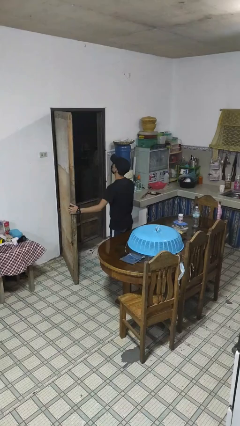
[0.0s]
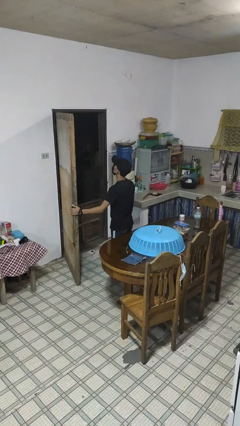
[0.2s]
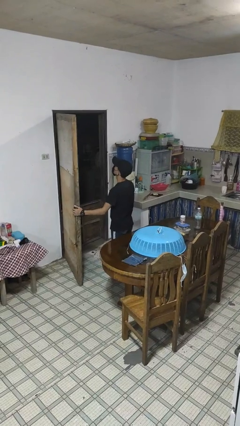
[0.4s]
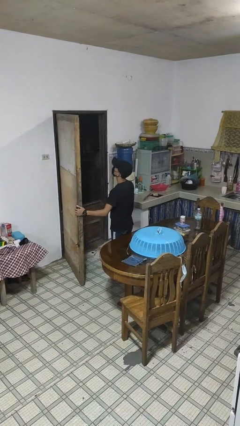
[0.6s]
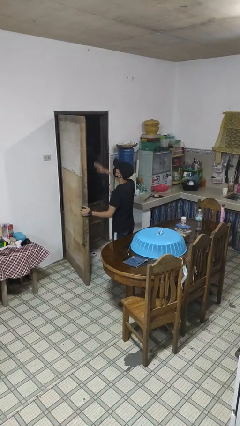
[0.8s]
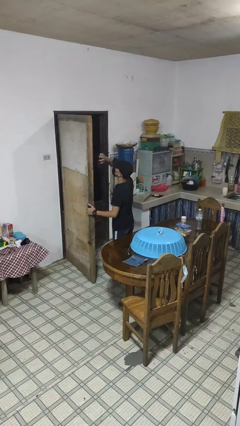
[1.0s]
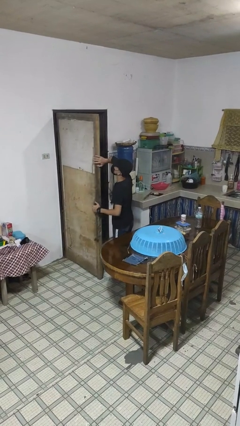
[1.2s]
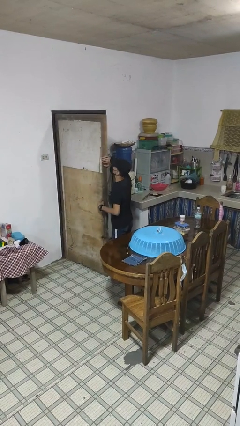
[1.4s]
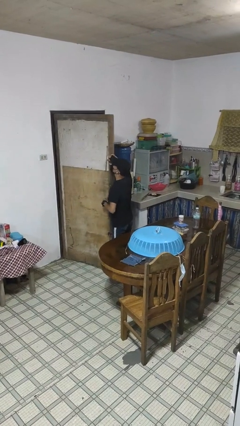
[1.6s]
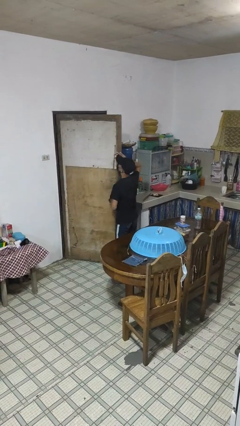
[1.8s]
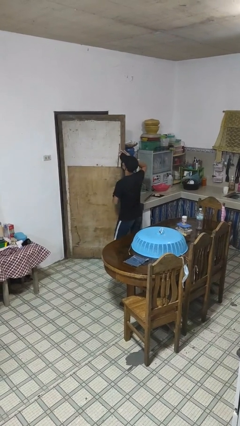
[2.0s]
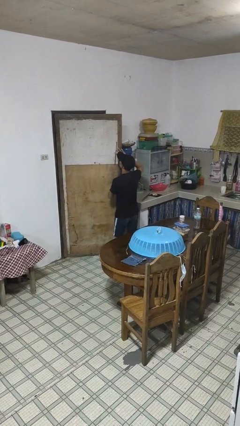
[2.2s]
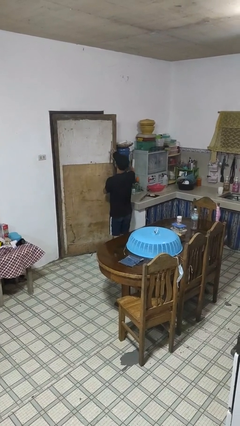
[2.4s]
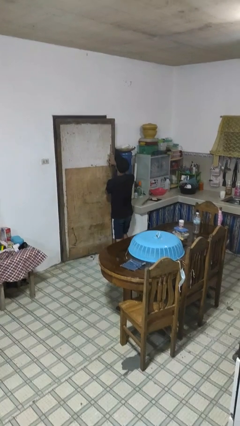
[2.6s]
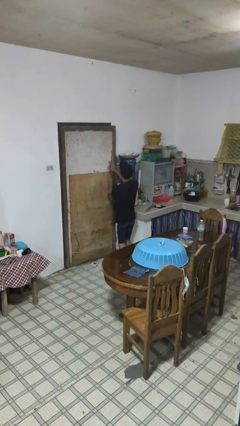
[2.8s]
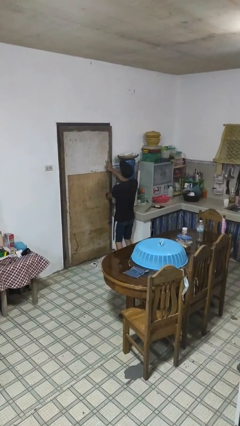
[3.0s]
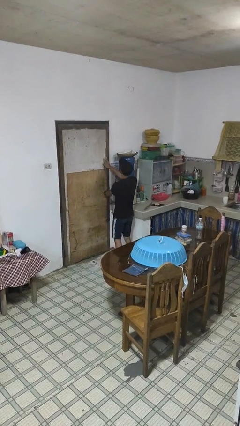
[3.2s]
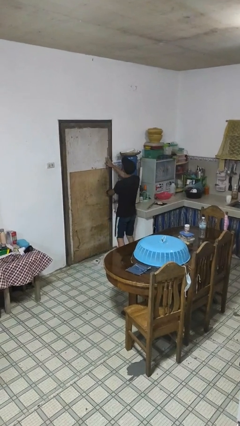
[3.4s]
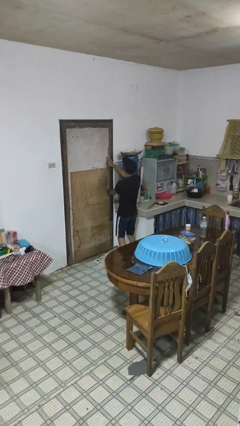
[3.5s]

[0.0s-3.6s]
person closes facility door

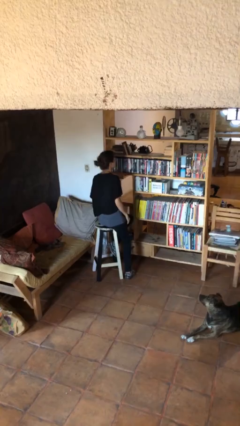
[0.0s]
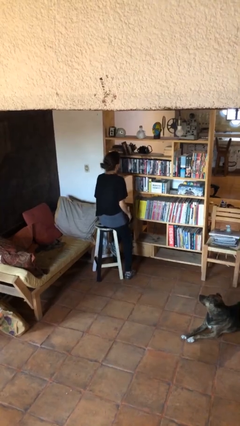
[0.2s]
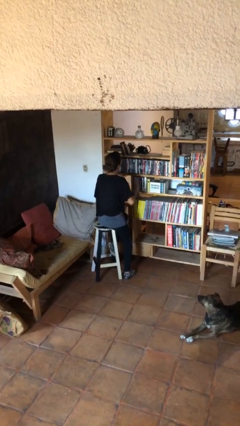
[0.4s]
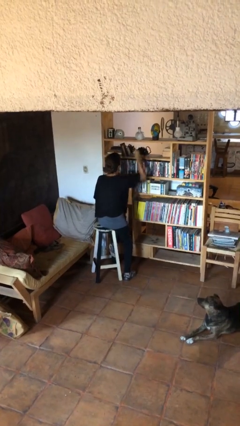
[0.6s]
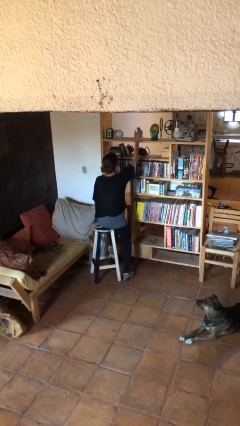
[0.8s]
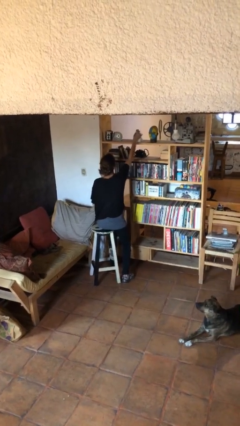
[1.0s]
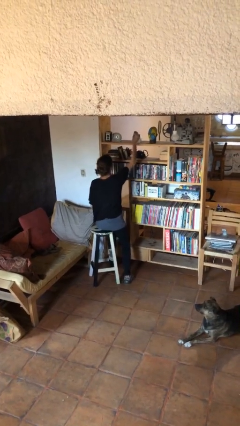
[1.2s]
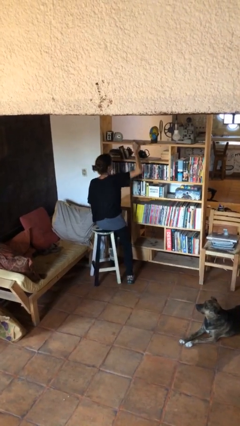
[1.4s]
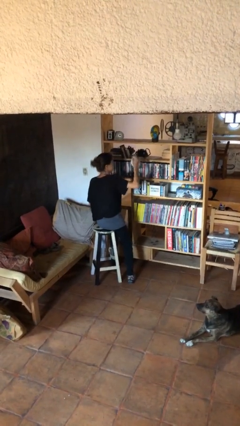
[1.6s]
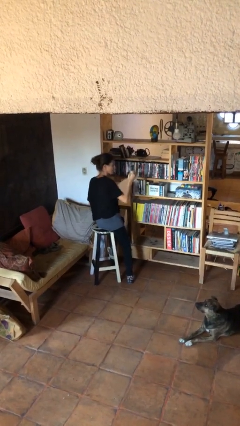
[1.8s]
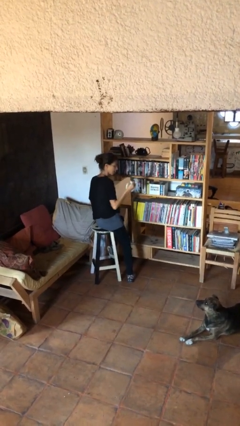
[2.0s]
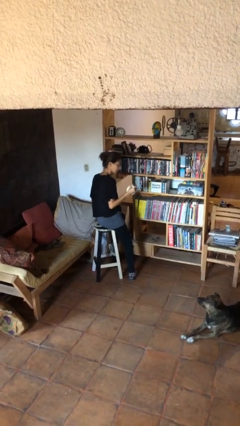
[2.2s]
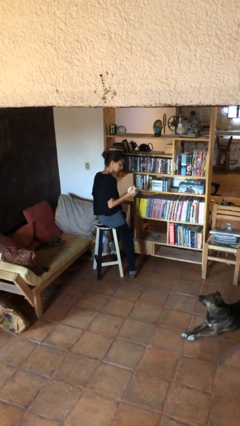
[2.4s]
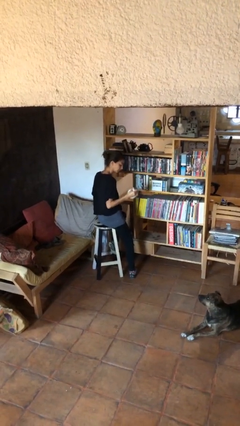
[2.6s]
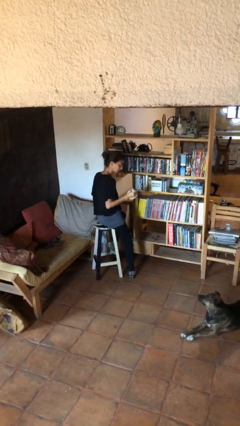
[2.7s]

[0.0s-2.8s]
person picks up object from countertop

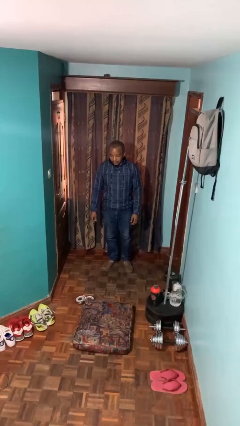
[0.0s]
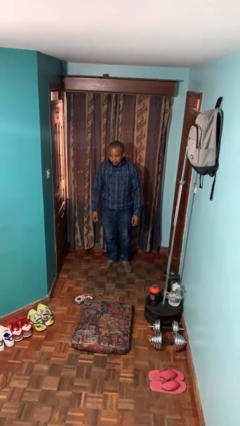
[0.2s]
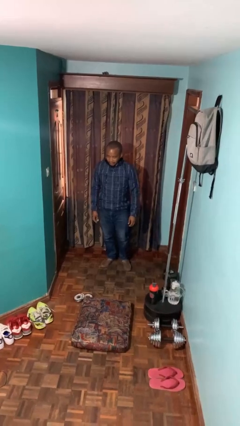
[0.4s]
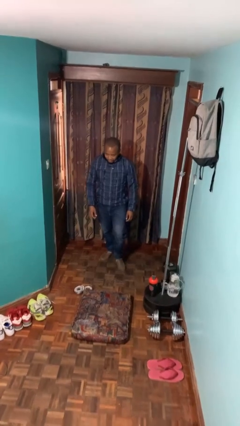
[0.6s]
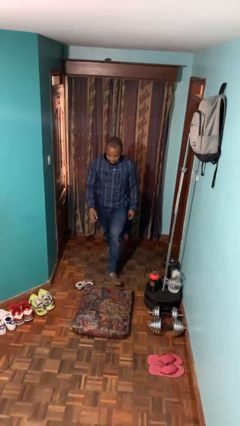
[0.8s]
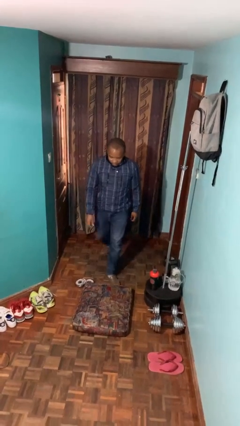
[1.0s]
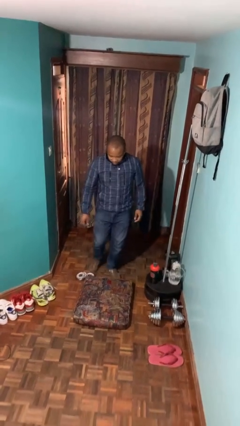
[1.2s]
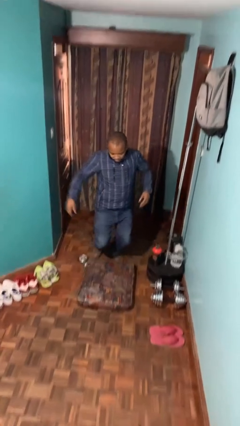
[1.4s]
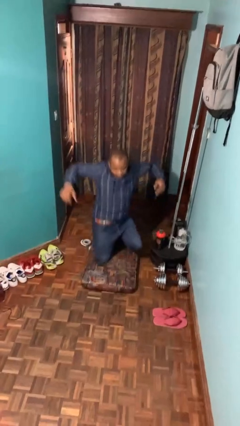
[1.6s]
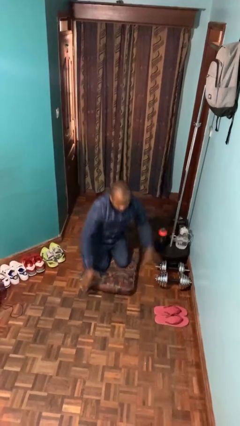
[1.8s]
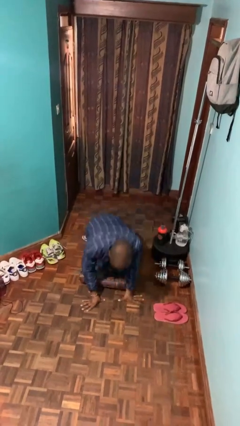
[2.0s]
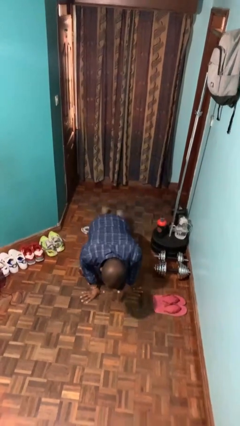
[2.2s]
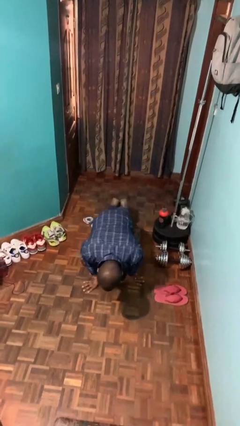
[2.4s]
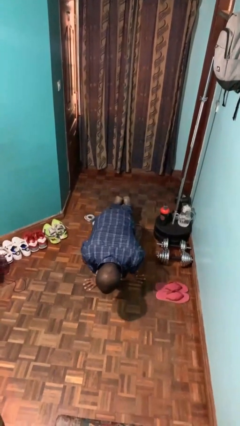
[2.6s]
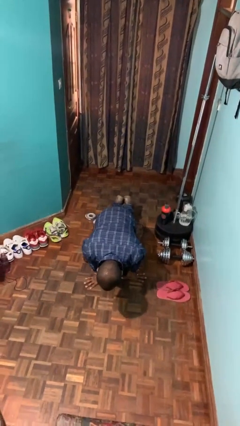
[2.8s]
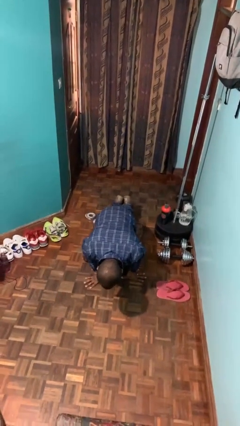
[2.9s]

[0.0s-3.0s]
person trips on object on floor

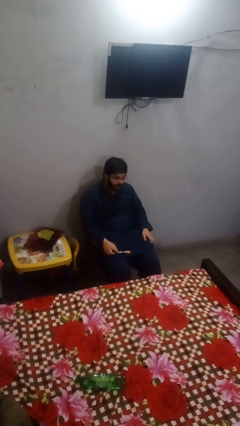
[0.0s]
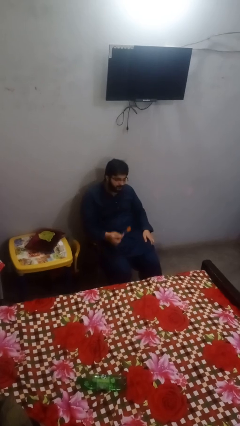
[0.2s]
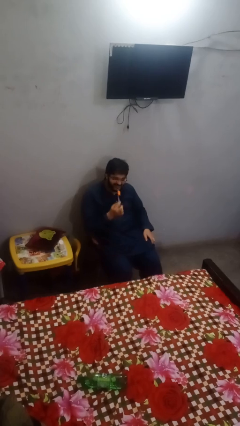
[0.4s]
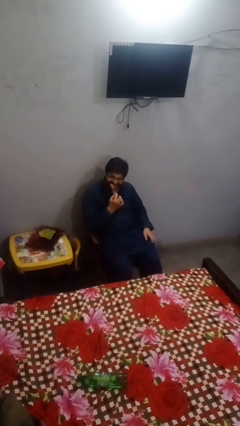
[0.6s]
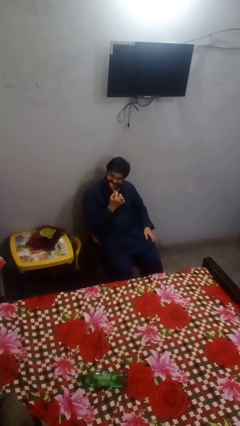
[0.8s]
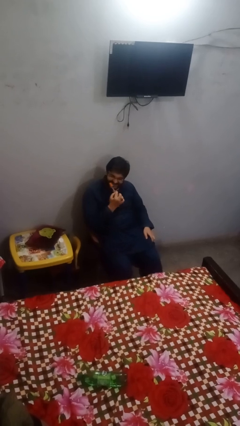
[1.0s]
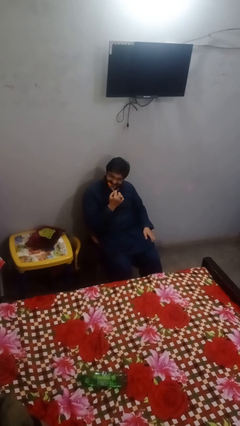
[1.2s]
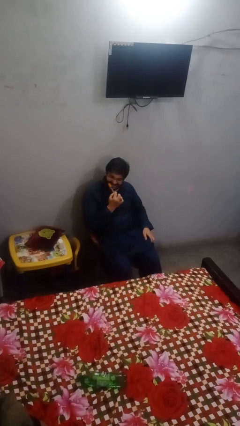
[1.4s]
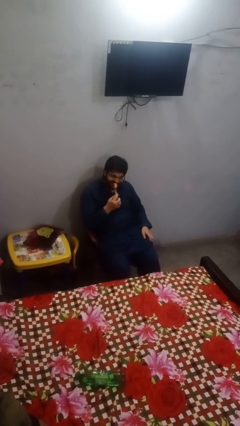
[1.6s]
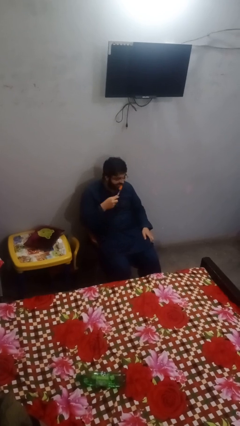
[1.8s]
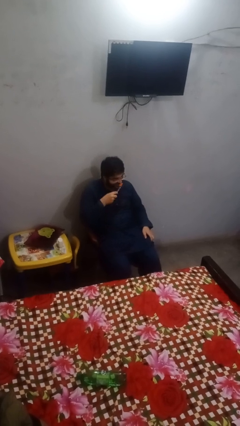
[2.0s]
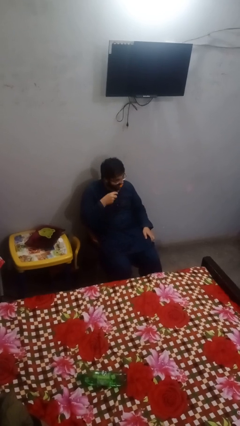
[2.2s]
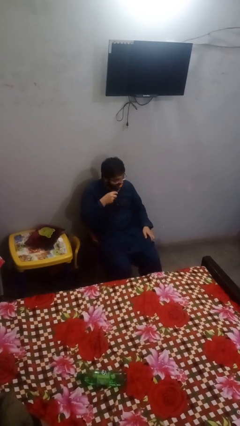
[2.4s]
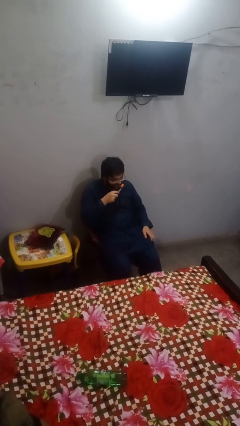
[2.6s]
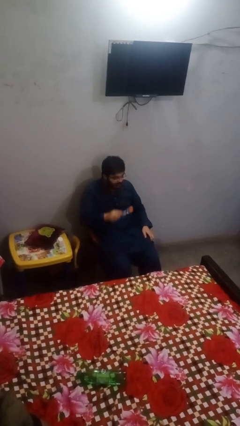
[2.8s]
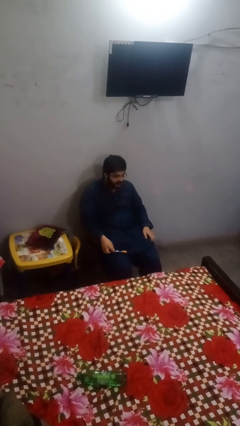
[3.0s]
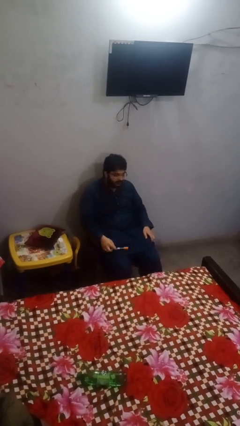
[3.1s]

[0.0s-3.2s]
person brushes teeth

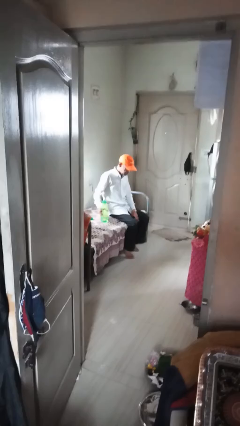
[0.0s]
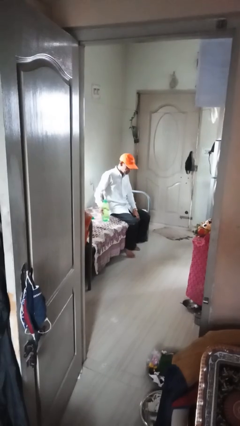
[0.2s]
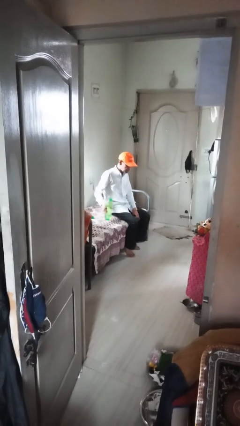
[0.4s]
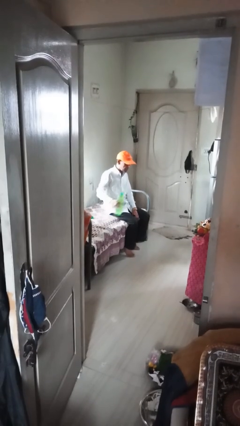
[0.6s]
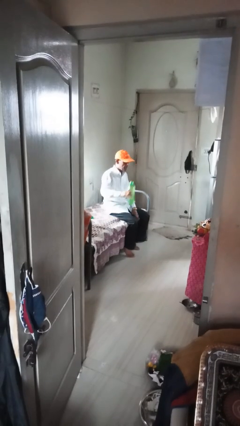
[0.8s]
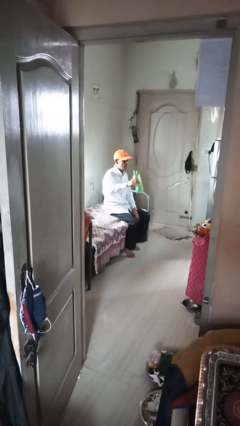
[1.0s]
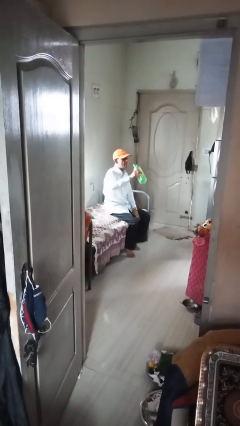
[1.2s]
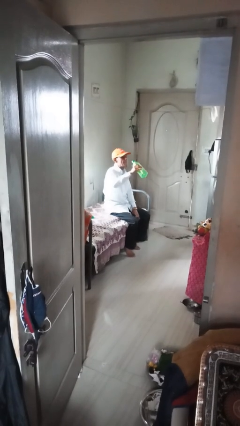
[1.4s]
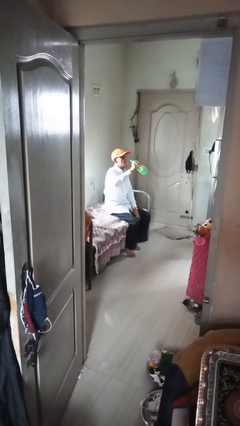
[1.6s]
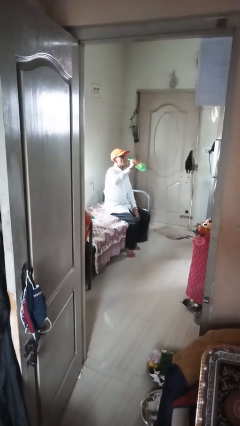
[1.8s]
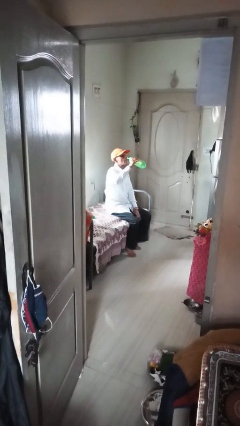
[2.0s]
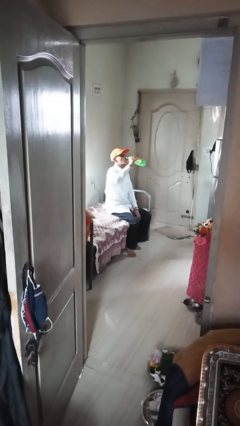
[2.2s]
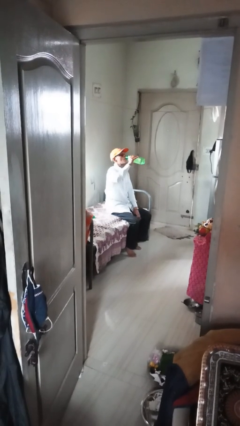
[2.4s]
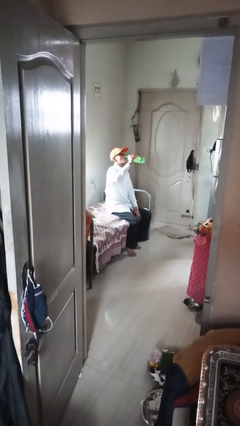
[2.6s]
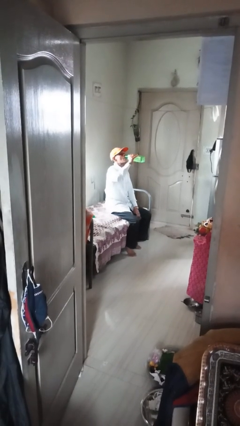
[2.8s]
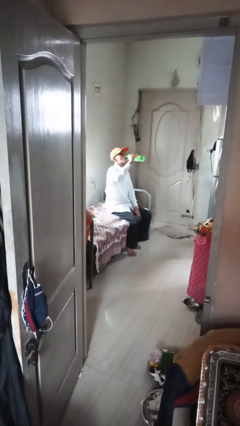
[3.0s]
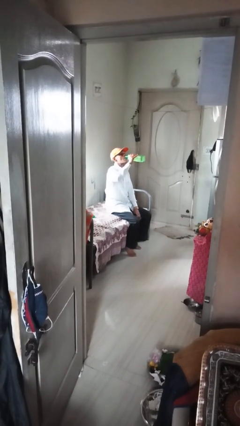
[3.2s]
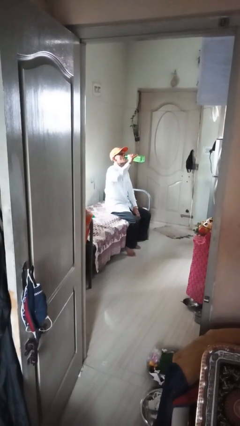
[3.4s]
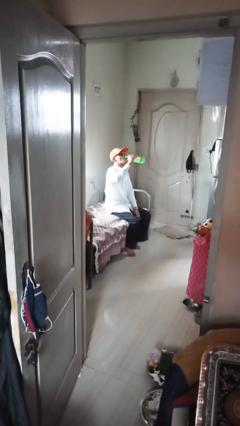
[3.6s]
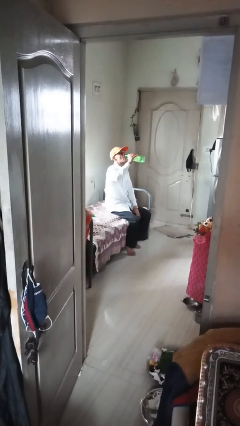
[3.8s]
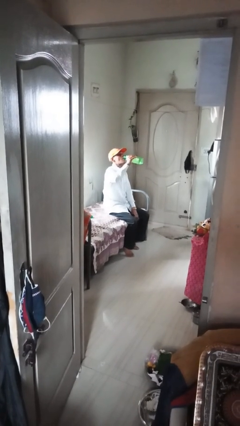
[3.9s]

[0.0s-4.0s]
person drinks from bottle

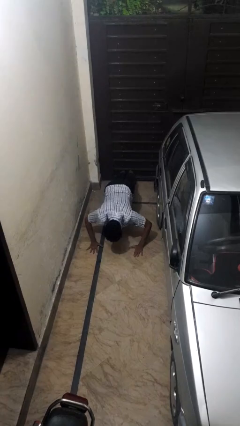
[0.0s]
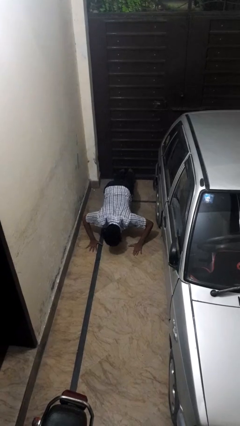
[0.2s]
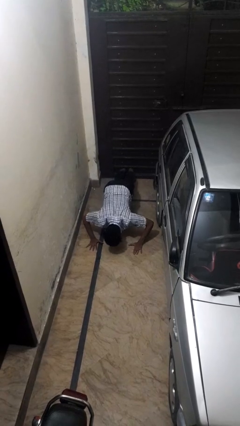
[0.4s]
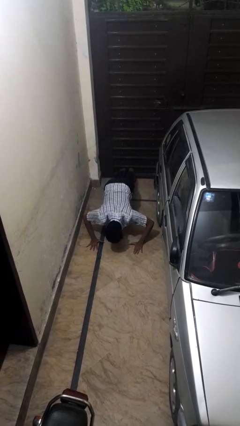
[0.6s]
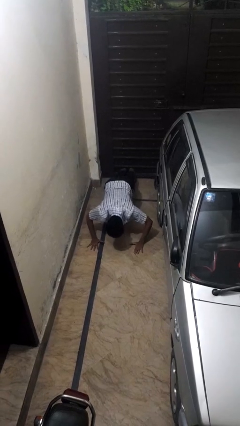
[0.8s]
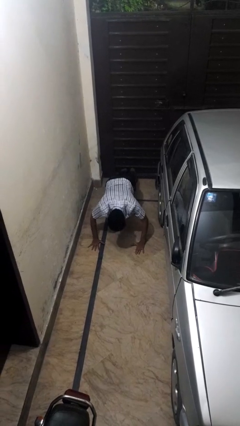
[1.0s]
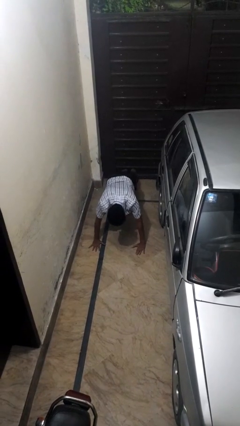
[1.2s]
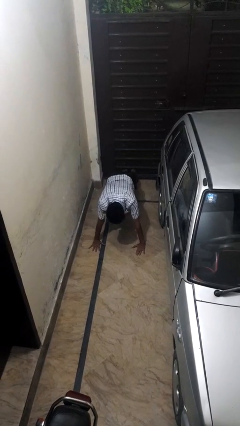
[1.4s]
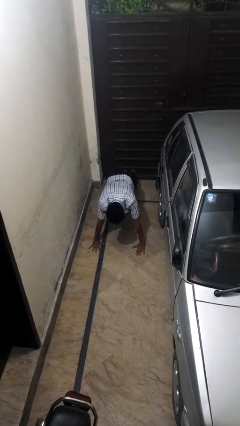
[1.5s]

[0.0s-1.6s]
person exercises with pushup
